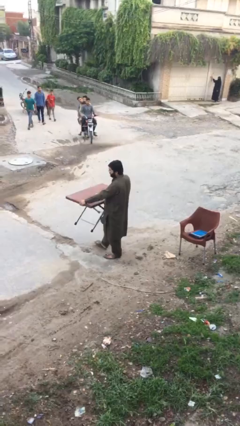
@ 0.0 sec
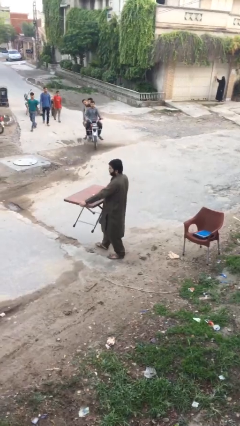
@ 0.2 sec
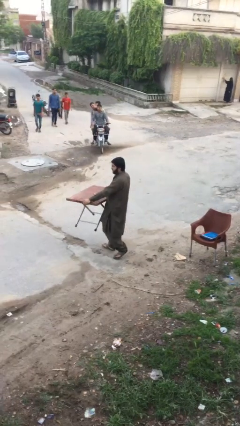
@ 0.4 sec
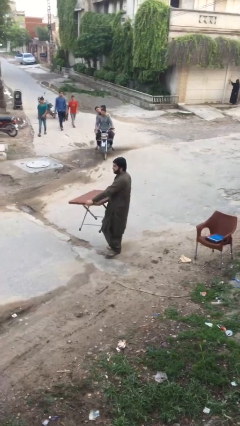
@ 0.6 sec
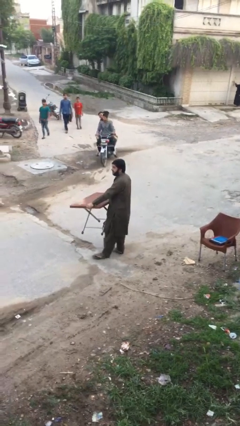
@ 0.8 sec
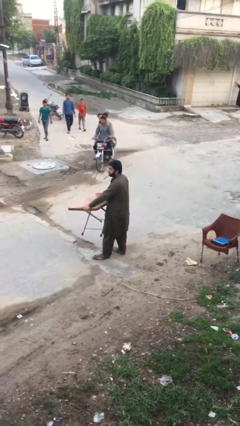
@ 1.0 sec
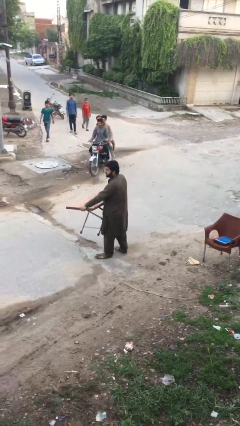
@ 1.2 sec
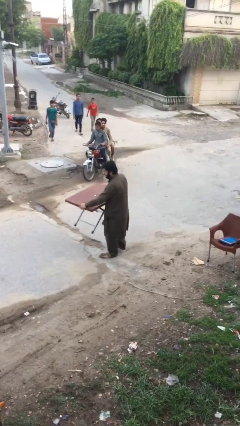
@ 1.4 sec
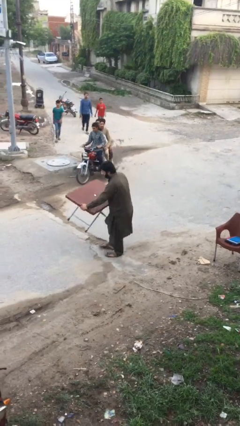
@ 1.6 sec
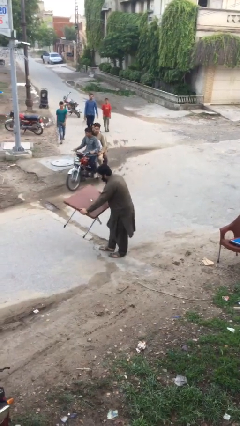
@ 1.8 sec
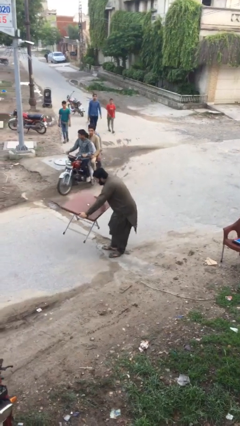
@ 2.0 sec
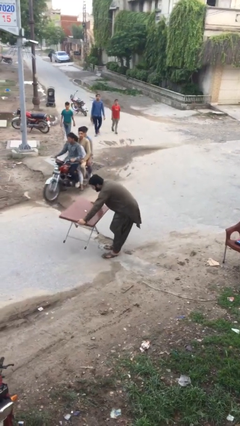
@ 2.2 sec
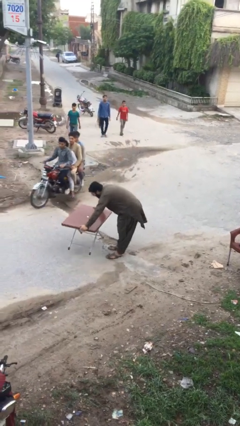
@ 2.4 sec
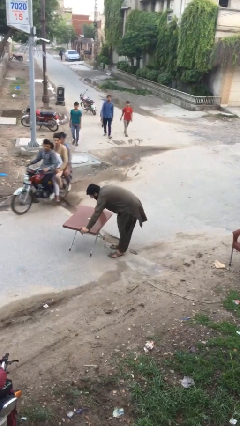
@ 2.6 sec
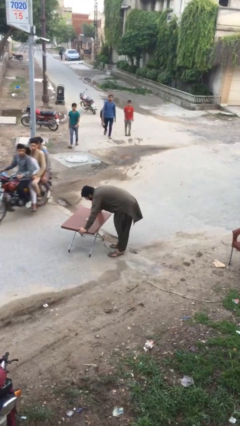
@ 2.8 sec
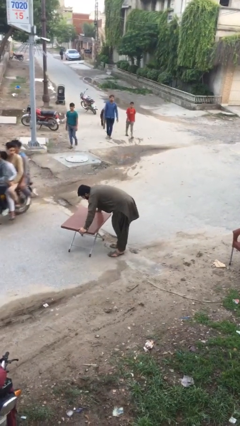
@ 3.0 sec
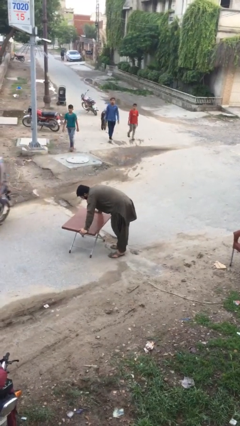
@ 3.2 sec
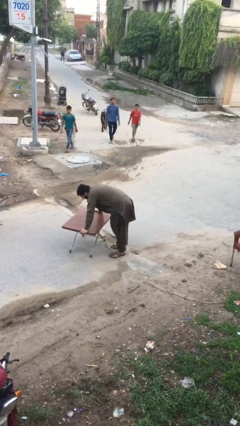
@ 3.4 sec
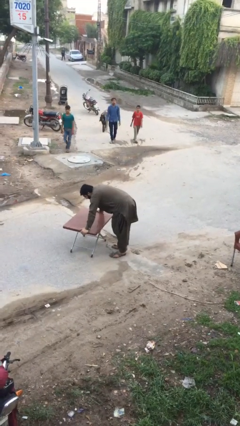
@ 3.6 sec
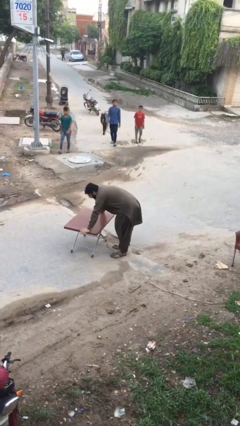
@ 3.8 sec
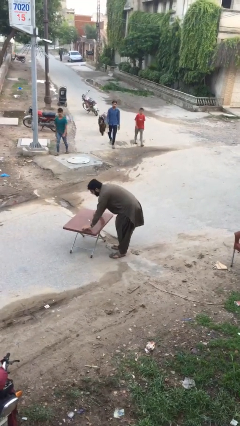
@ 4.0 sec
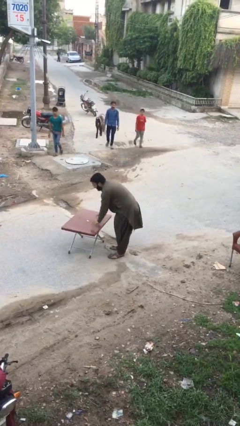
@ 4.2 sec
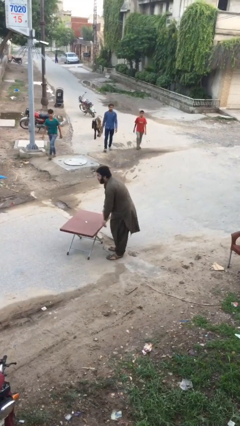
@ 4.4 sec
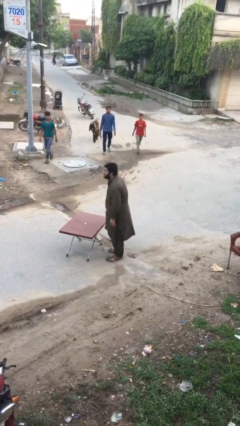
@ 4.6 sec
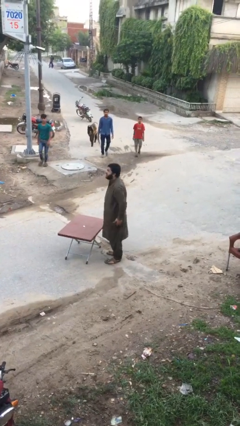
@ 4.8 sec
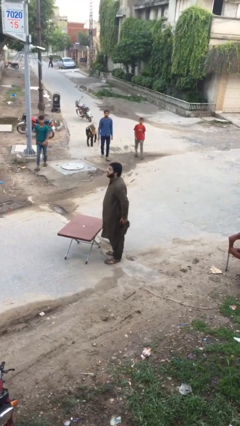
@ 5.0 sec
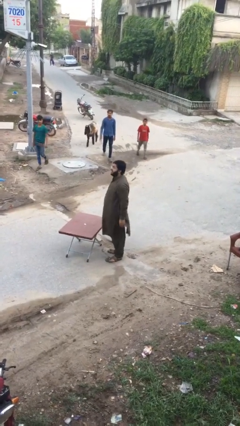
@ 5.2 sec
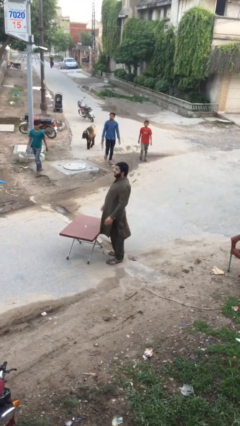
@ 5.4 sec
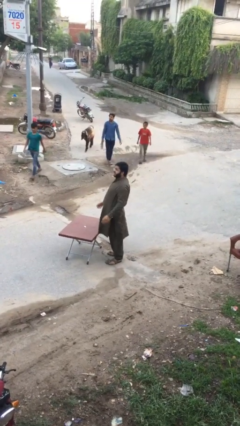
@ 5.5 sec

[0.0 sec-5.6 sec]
person puts down object on floor

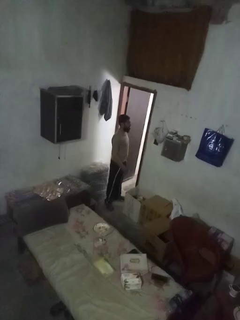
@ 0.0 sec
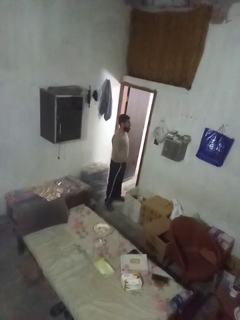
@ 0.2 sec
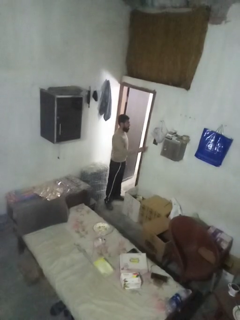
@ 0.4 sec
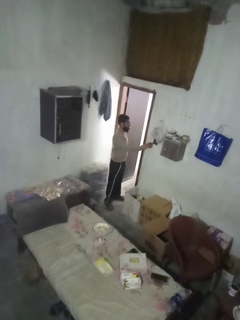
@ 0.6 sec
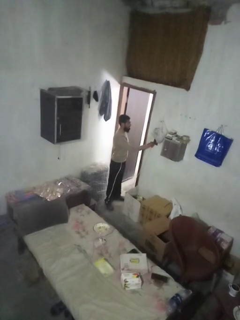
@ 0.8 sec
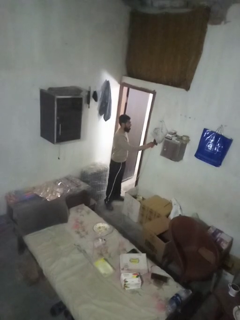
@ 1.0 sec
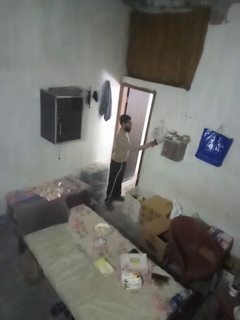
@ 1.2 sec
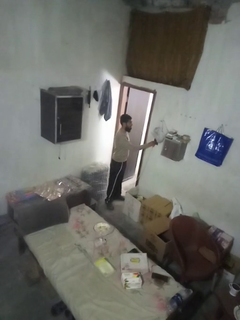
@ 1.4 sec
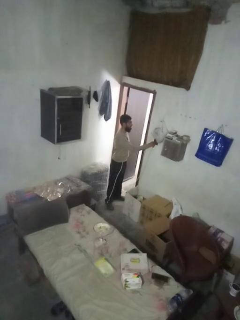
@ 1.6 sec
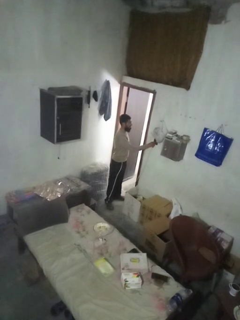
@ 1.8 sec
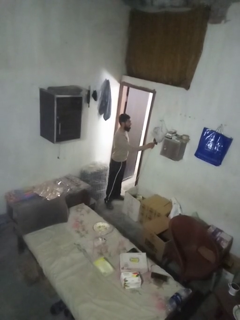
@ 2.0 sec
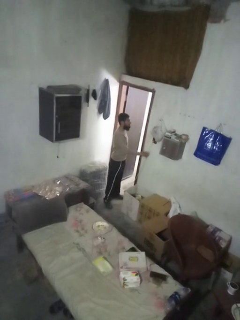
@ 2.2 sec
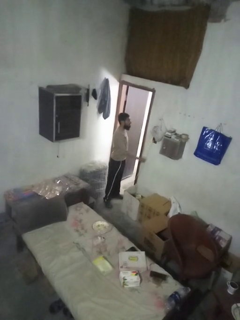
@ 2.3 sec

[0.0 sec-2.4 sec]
person plugs into electrical socket

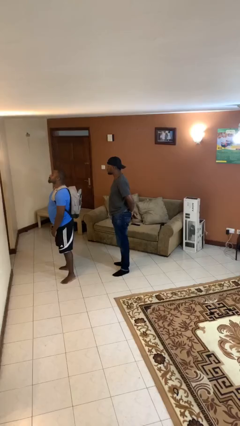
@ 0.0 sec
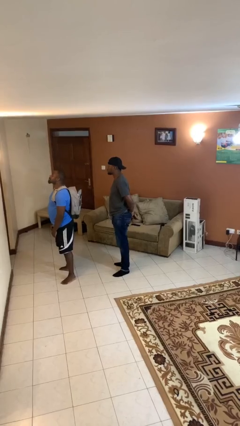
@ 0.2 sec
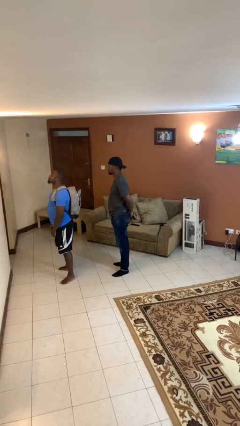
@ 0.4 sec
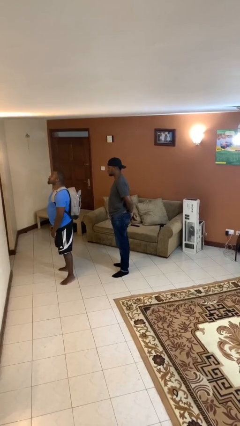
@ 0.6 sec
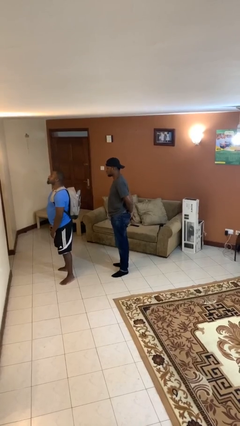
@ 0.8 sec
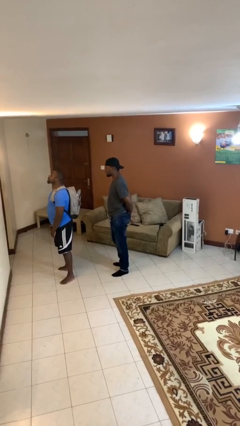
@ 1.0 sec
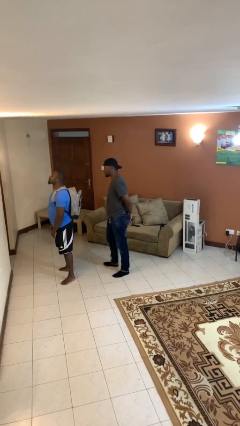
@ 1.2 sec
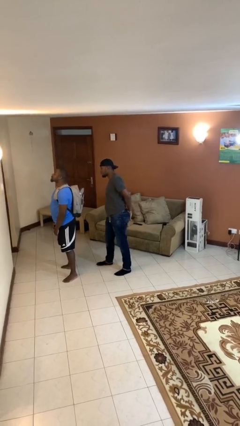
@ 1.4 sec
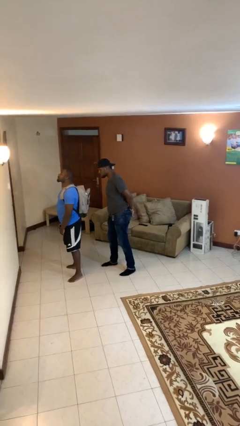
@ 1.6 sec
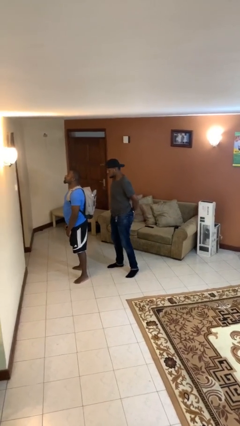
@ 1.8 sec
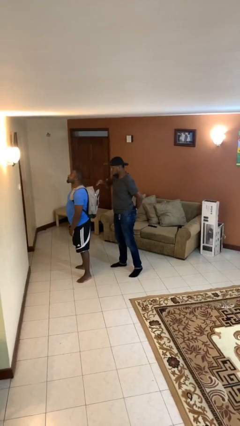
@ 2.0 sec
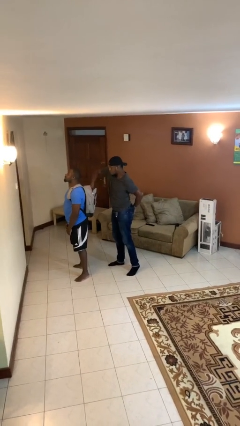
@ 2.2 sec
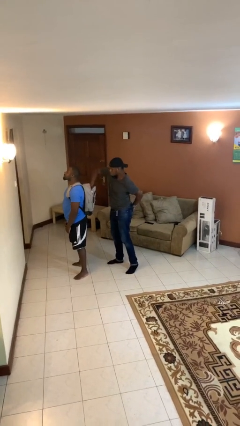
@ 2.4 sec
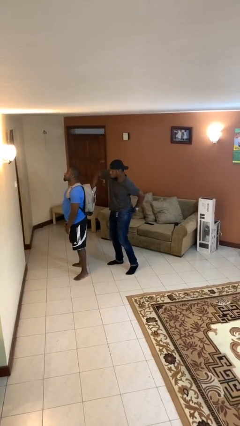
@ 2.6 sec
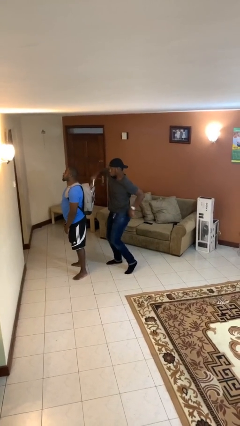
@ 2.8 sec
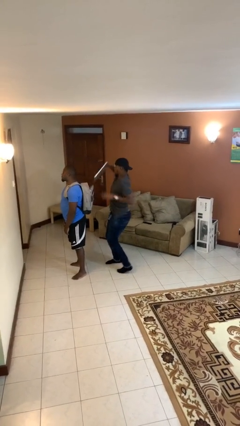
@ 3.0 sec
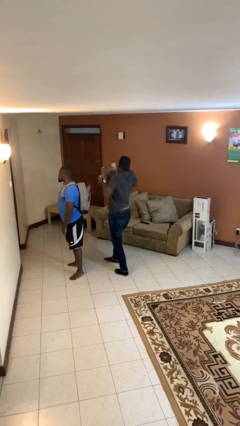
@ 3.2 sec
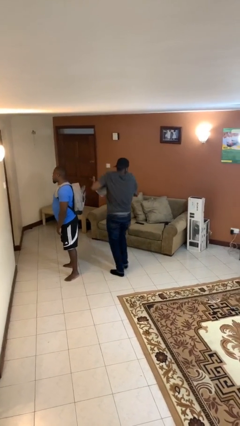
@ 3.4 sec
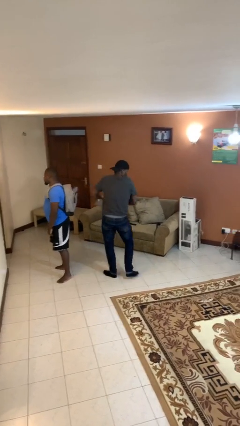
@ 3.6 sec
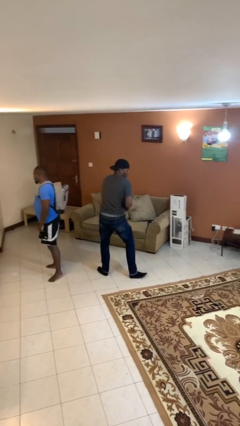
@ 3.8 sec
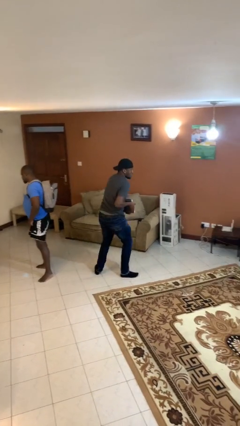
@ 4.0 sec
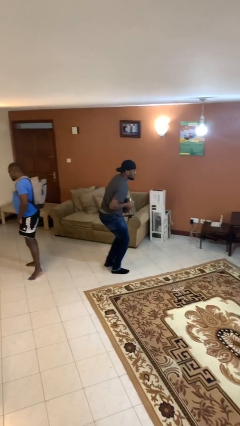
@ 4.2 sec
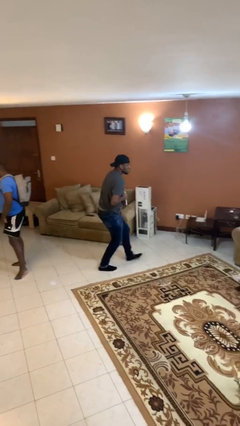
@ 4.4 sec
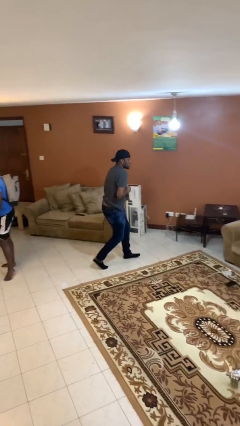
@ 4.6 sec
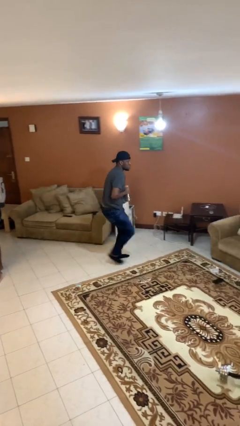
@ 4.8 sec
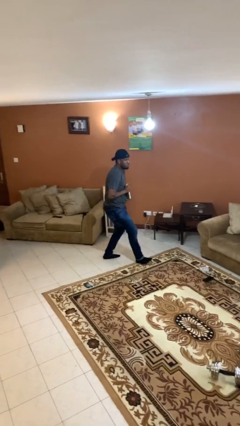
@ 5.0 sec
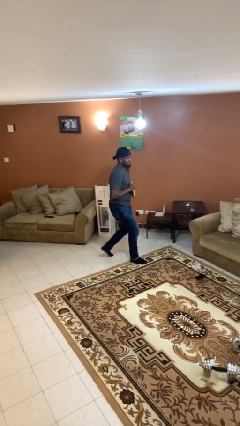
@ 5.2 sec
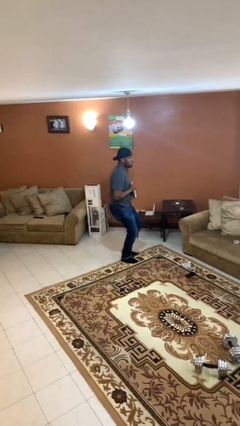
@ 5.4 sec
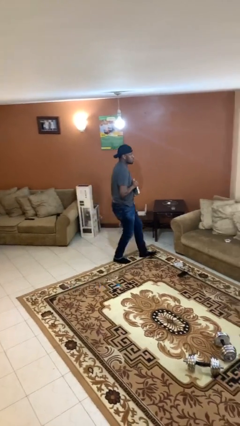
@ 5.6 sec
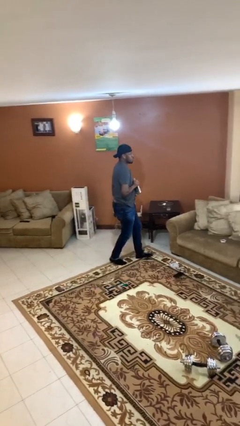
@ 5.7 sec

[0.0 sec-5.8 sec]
person steals object from person

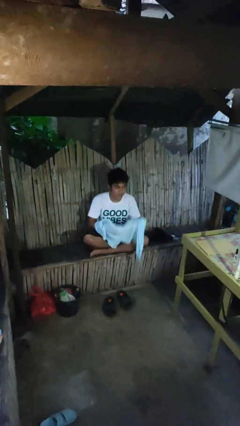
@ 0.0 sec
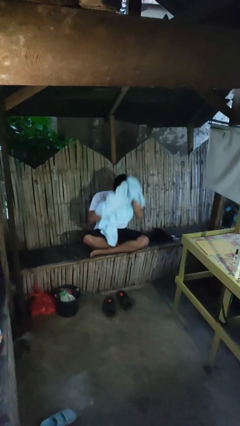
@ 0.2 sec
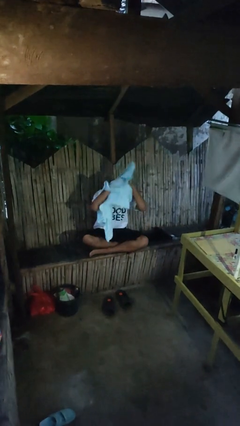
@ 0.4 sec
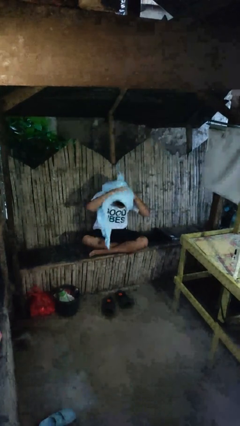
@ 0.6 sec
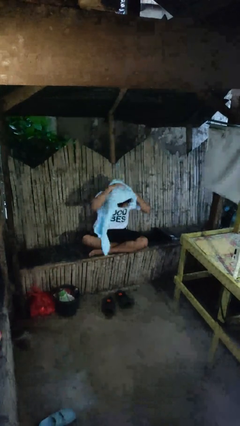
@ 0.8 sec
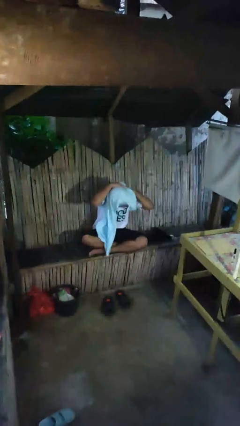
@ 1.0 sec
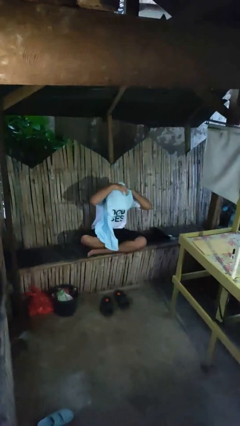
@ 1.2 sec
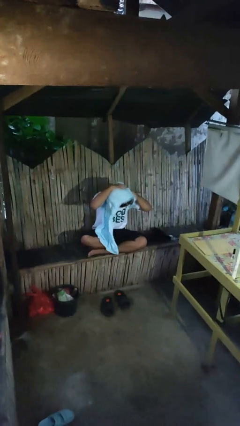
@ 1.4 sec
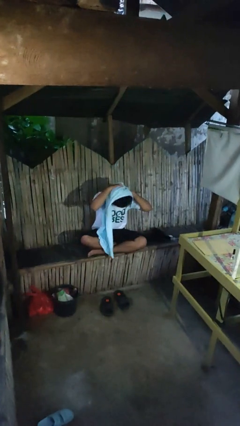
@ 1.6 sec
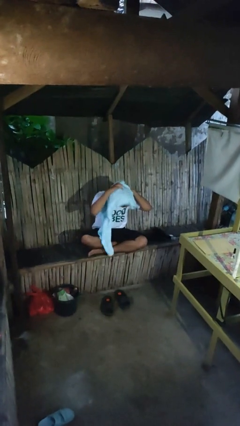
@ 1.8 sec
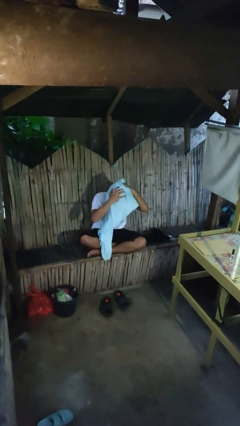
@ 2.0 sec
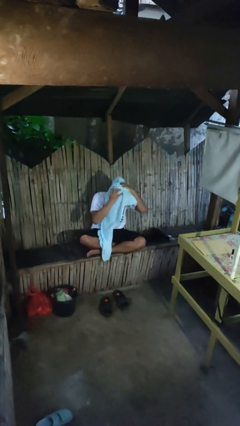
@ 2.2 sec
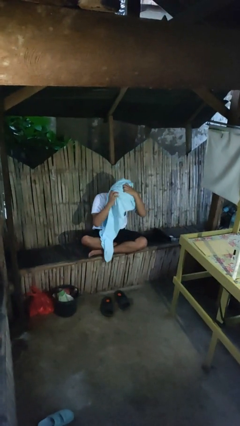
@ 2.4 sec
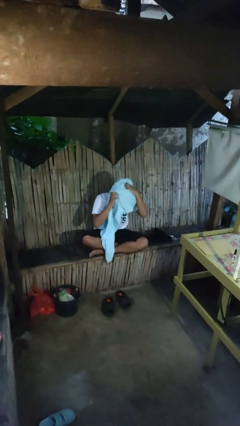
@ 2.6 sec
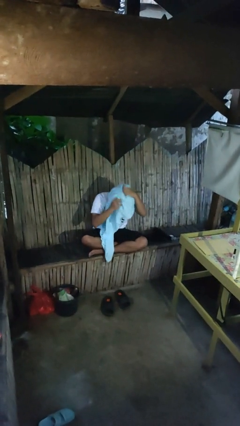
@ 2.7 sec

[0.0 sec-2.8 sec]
person dries hair with towel

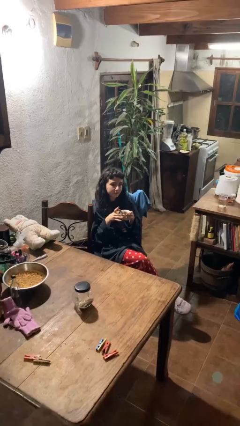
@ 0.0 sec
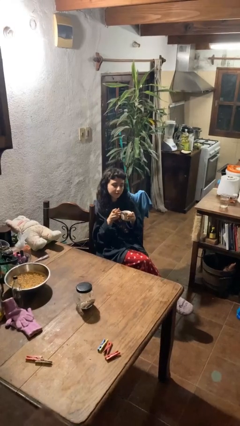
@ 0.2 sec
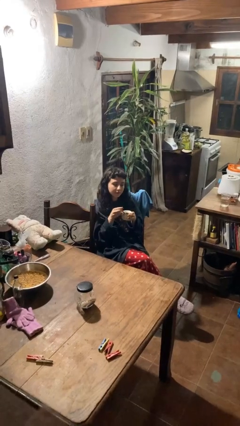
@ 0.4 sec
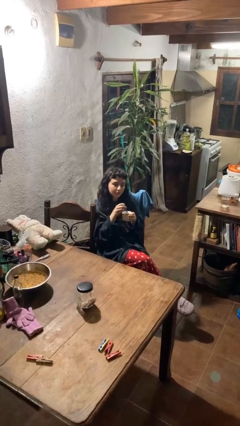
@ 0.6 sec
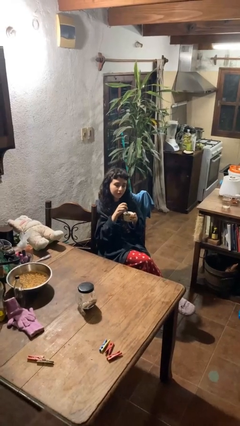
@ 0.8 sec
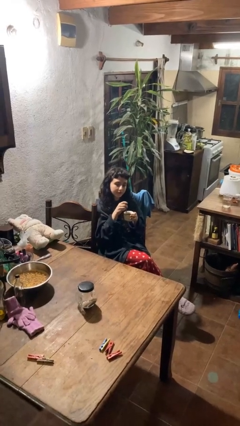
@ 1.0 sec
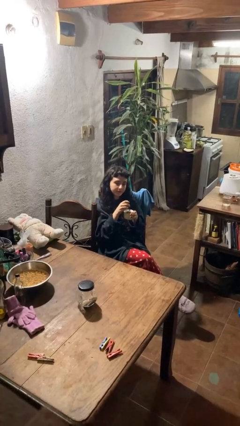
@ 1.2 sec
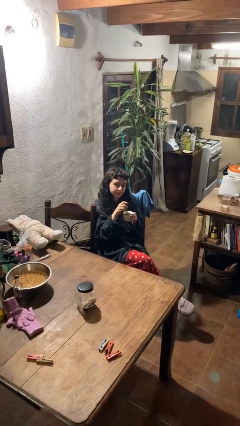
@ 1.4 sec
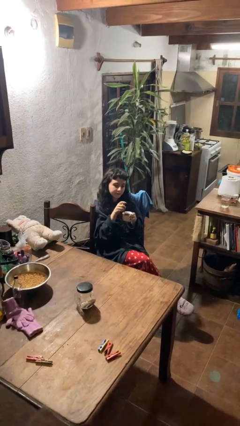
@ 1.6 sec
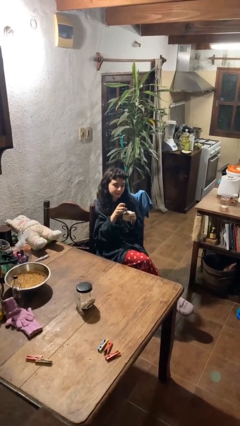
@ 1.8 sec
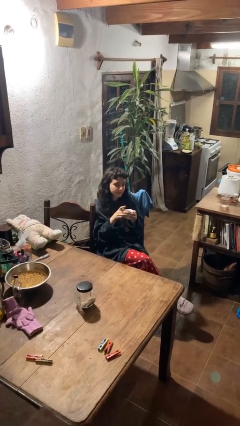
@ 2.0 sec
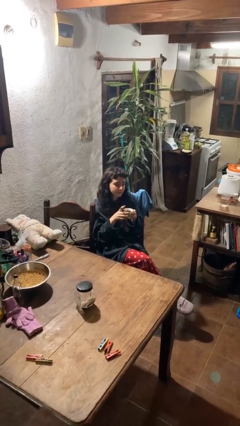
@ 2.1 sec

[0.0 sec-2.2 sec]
person stirs mug
